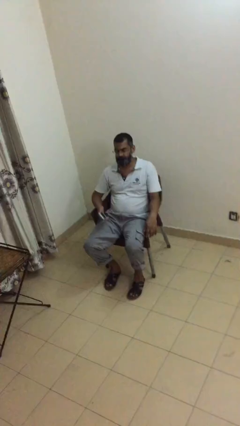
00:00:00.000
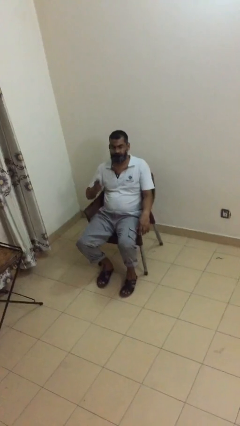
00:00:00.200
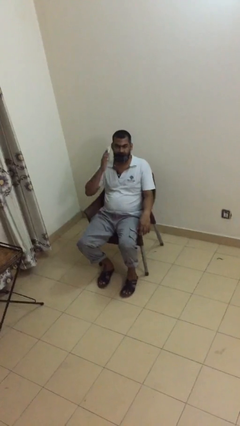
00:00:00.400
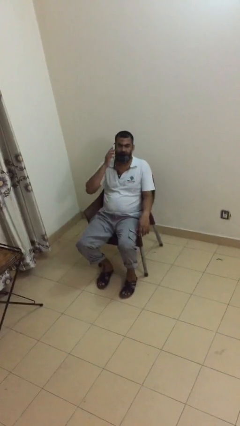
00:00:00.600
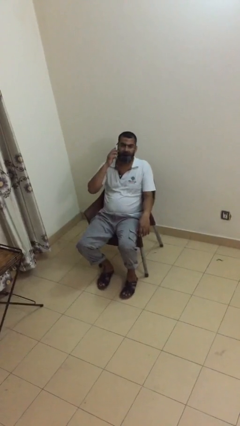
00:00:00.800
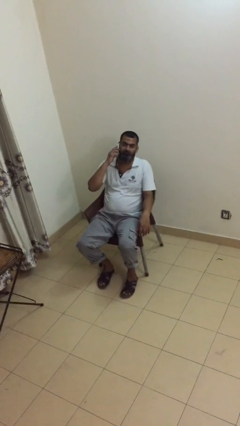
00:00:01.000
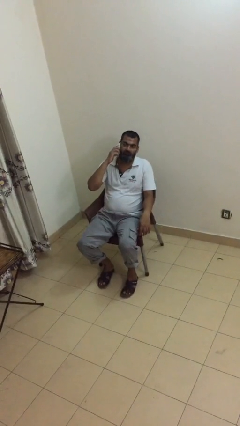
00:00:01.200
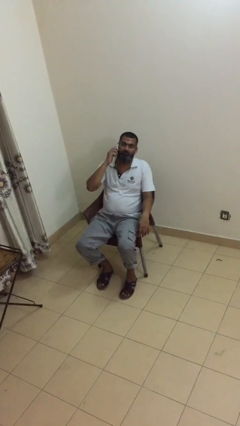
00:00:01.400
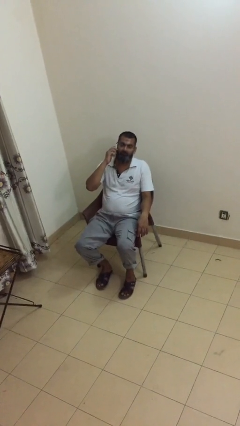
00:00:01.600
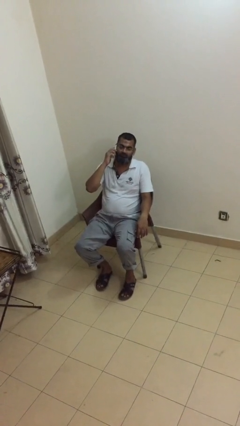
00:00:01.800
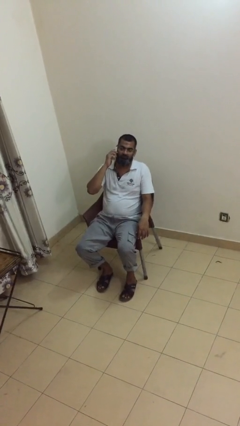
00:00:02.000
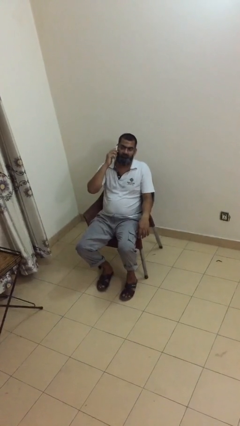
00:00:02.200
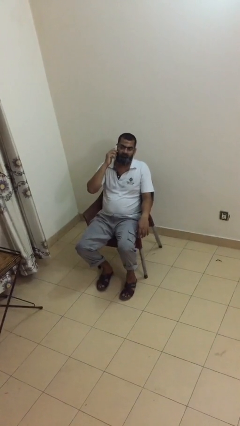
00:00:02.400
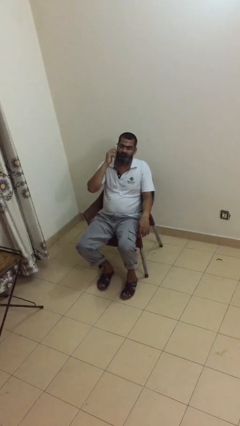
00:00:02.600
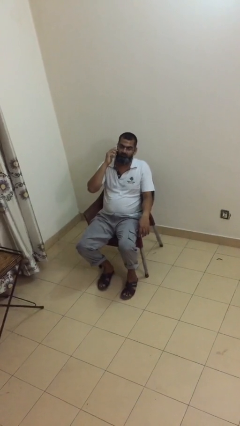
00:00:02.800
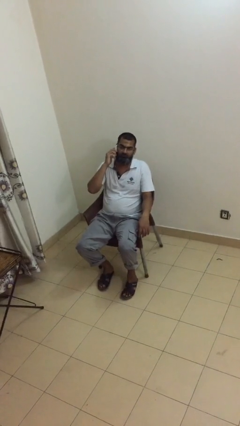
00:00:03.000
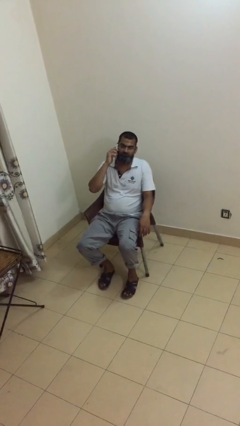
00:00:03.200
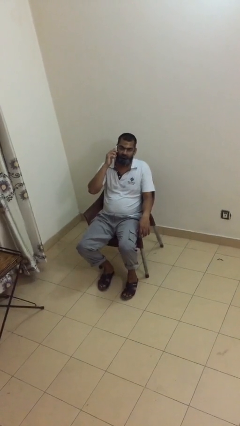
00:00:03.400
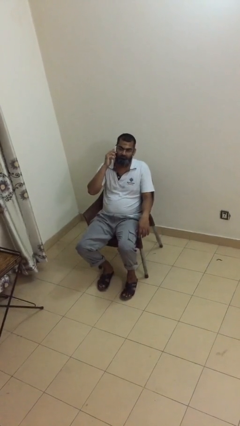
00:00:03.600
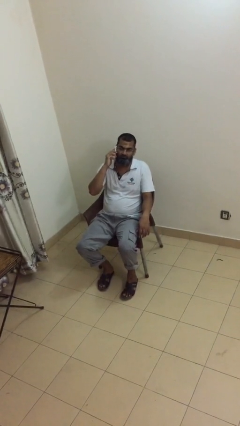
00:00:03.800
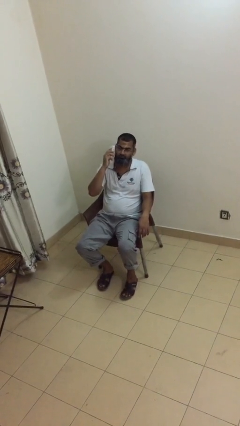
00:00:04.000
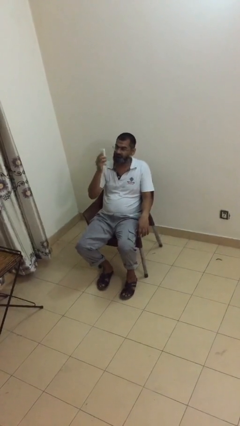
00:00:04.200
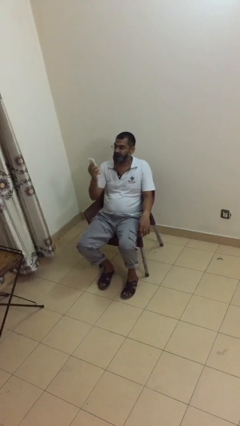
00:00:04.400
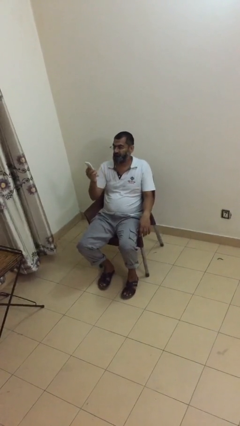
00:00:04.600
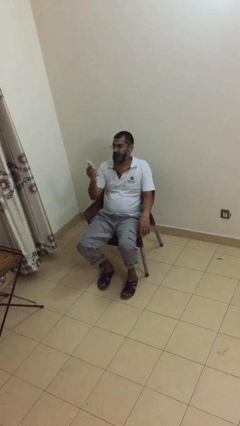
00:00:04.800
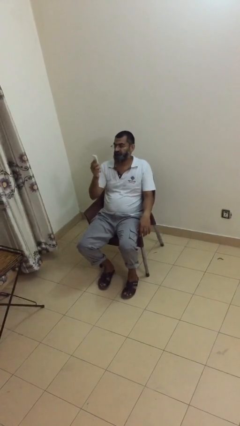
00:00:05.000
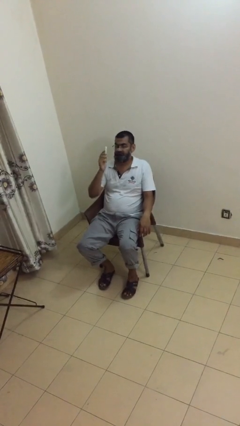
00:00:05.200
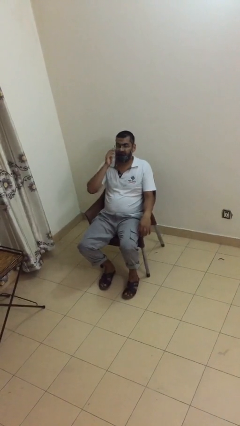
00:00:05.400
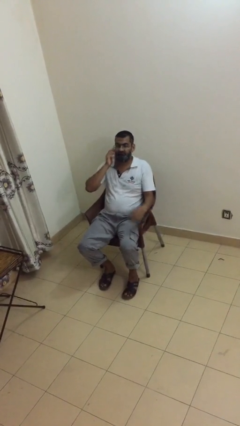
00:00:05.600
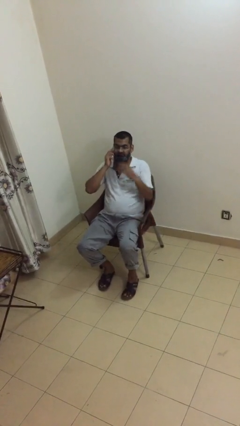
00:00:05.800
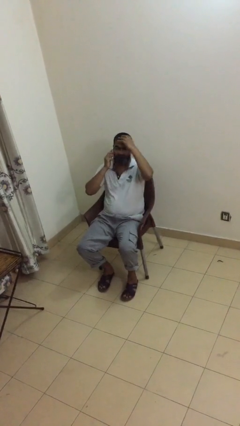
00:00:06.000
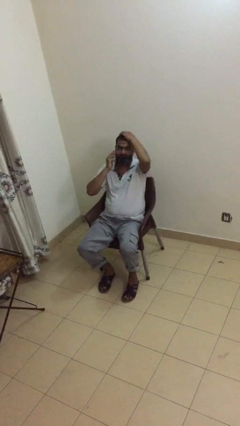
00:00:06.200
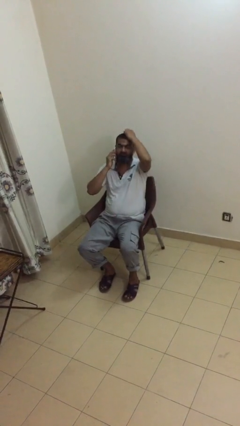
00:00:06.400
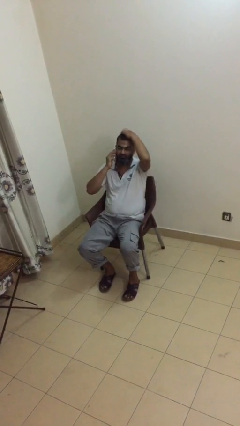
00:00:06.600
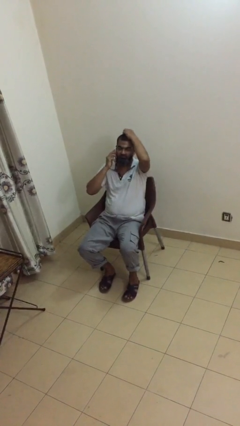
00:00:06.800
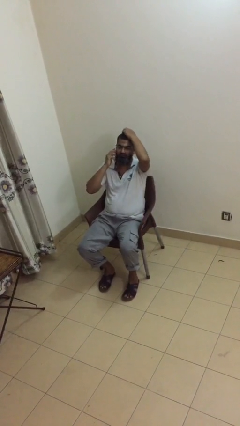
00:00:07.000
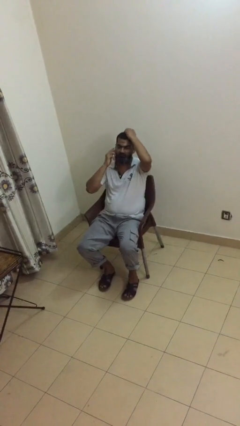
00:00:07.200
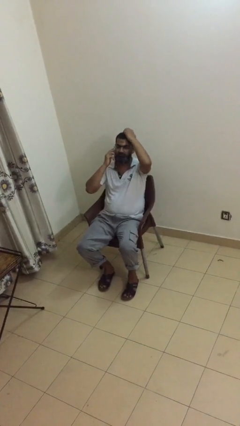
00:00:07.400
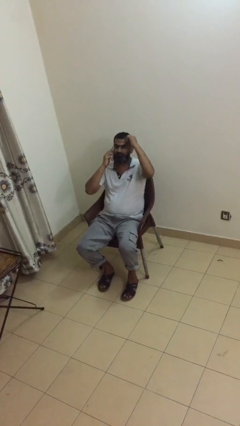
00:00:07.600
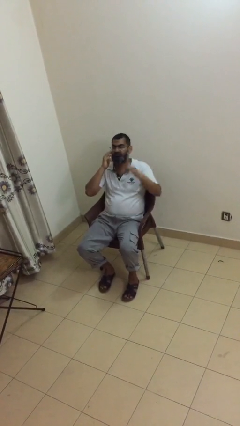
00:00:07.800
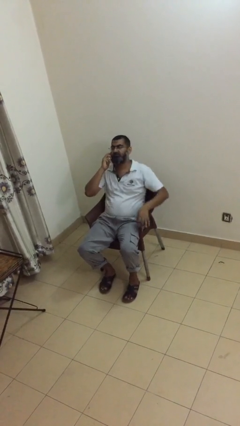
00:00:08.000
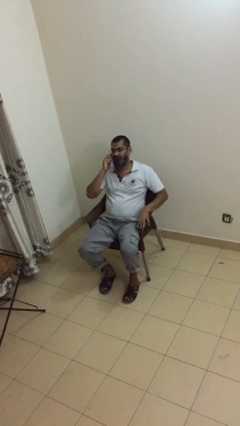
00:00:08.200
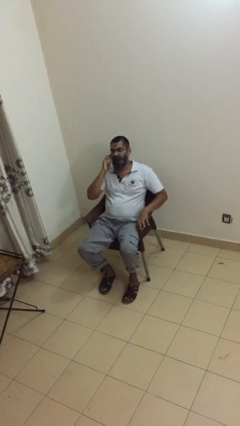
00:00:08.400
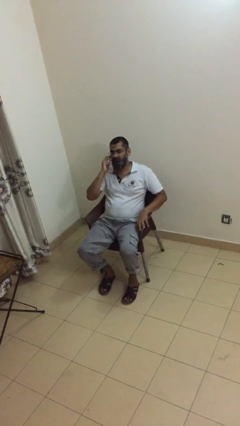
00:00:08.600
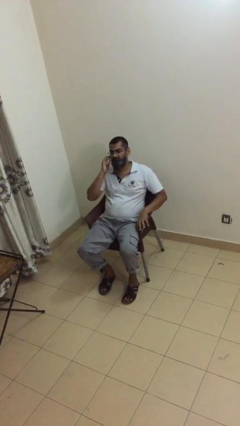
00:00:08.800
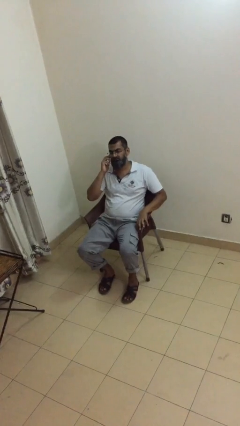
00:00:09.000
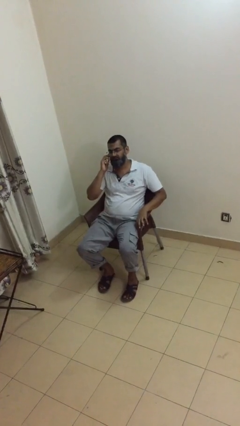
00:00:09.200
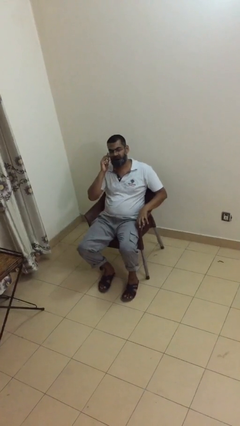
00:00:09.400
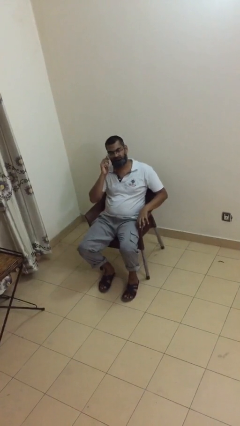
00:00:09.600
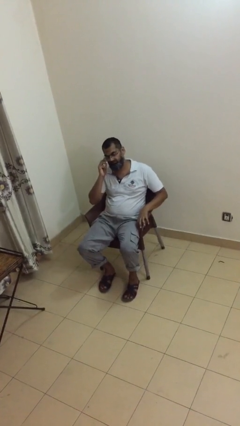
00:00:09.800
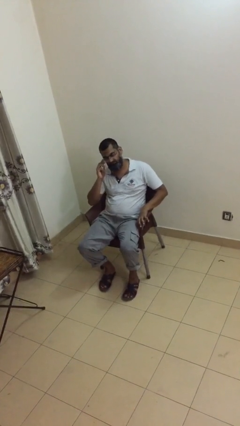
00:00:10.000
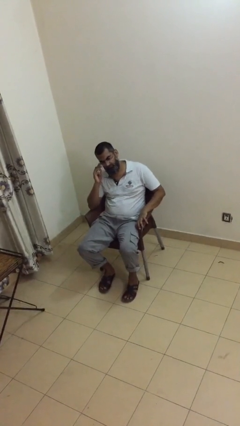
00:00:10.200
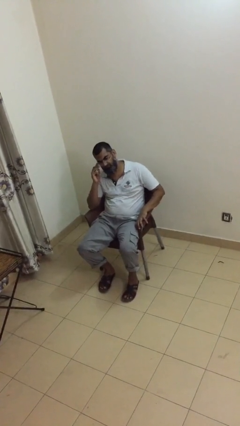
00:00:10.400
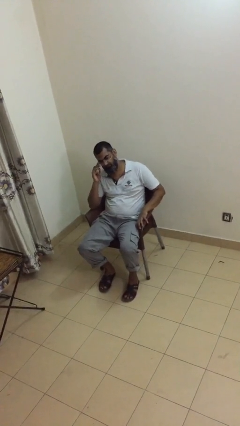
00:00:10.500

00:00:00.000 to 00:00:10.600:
person talks on phone

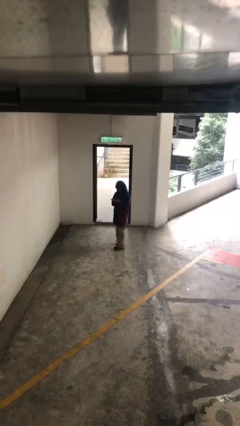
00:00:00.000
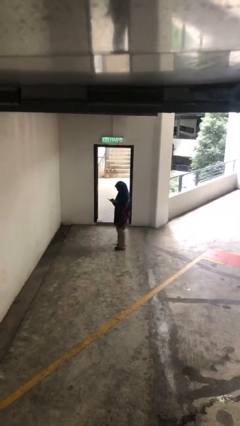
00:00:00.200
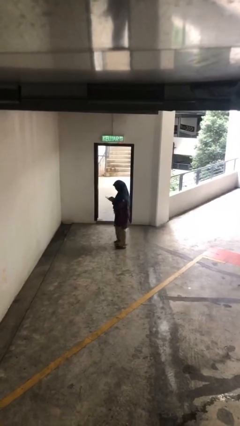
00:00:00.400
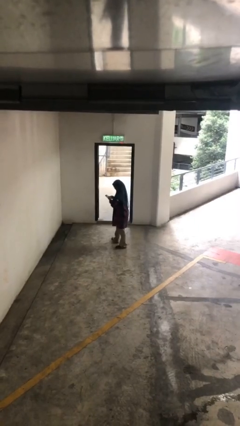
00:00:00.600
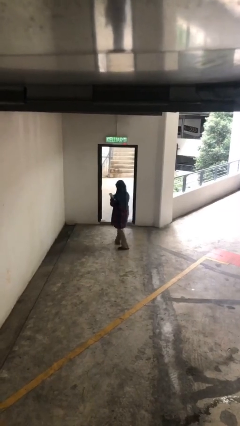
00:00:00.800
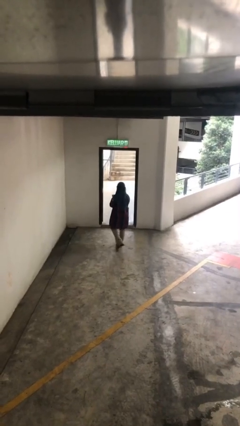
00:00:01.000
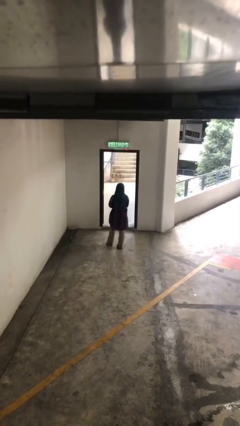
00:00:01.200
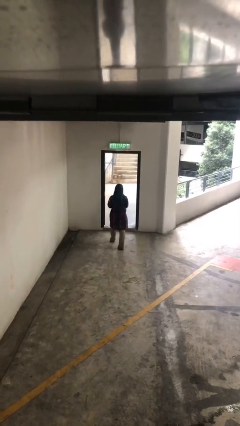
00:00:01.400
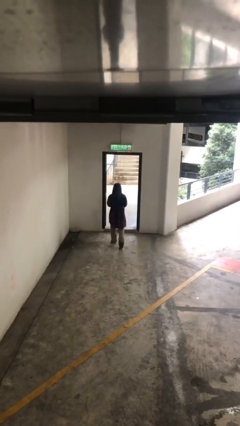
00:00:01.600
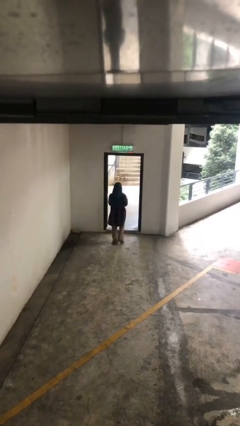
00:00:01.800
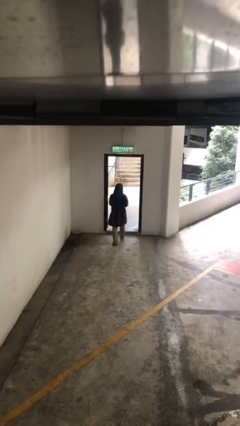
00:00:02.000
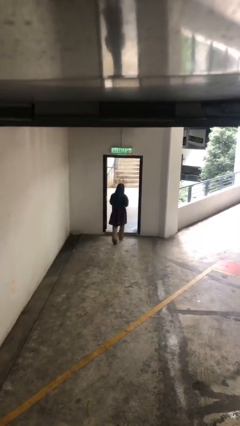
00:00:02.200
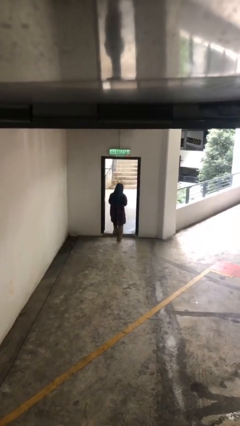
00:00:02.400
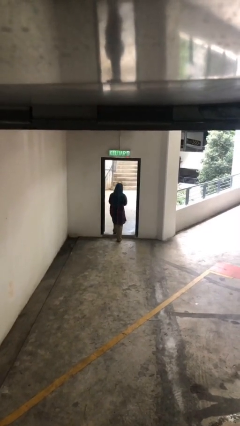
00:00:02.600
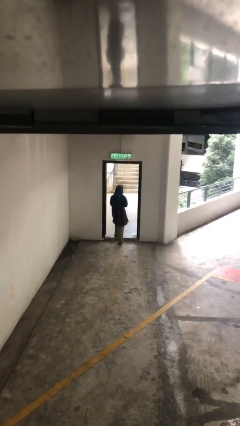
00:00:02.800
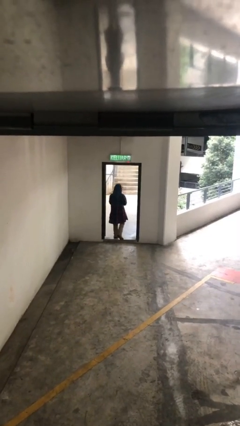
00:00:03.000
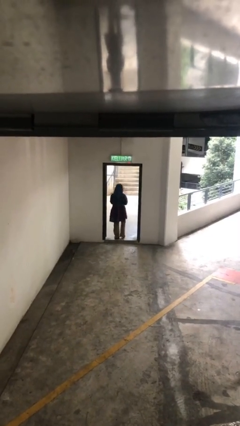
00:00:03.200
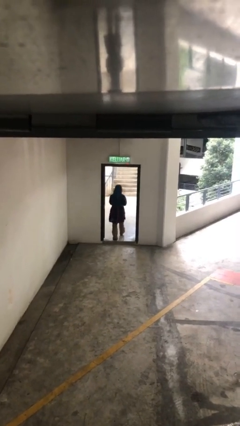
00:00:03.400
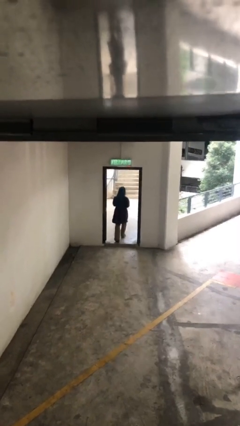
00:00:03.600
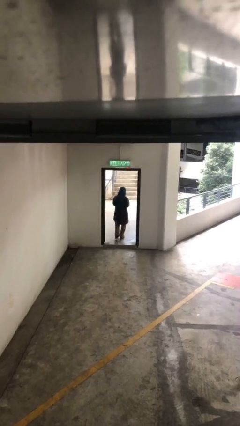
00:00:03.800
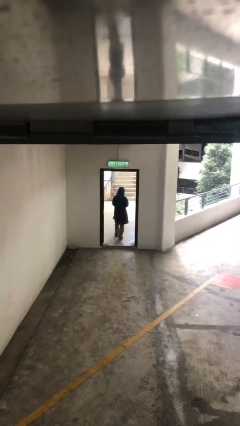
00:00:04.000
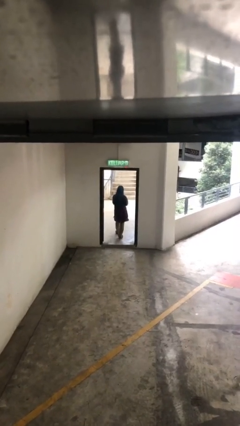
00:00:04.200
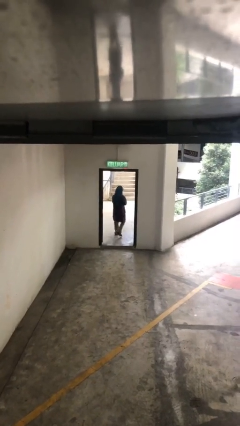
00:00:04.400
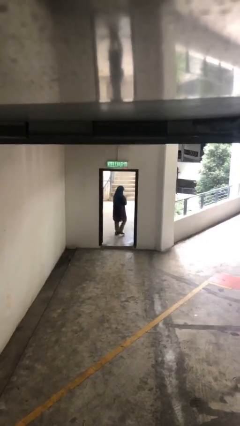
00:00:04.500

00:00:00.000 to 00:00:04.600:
person exits scene through structure

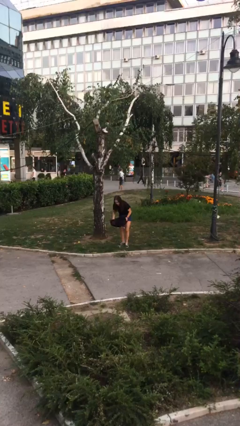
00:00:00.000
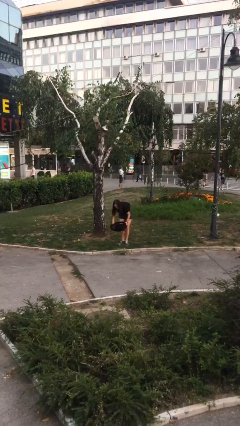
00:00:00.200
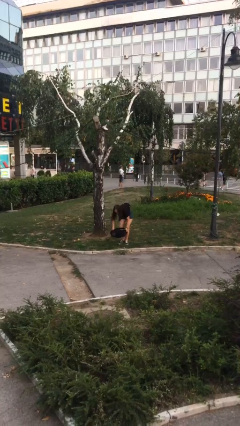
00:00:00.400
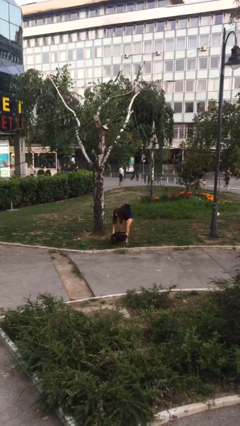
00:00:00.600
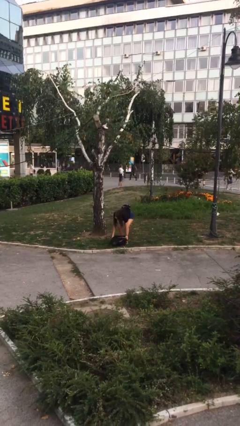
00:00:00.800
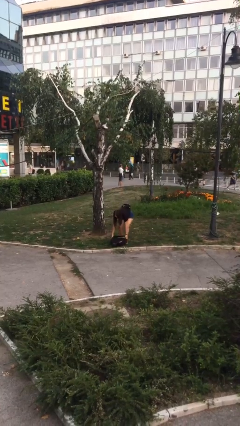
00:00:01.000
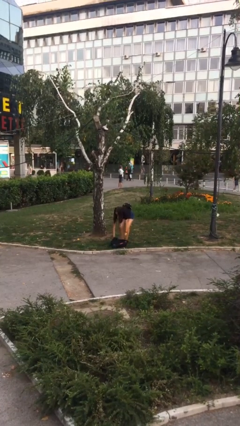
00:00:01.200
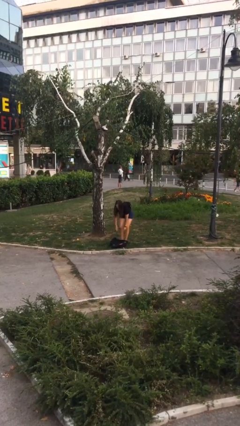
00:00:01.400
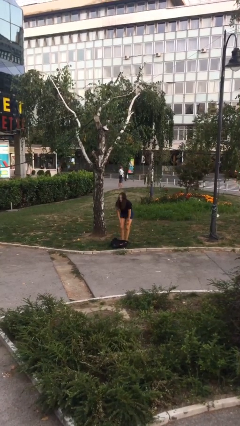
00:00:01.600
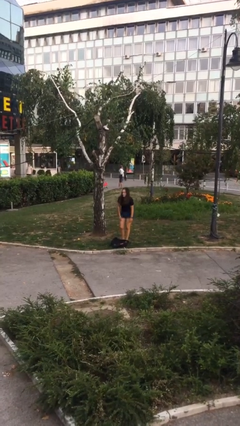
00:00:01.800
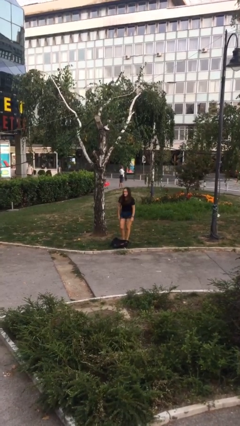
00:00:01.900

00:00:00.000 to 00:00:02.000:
person puts down object on floor

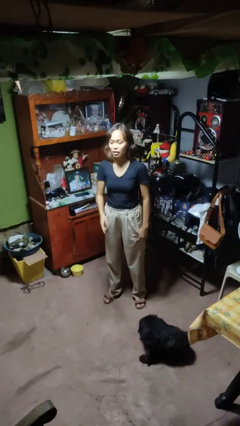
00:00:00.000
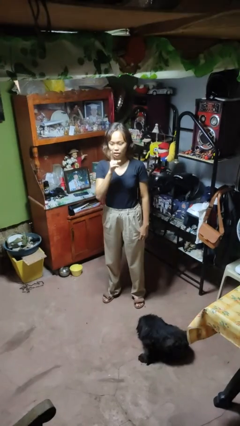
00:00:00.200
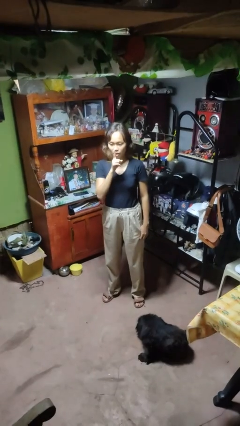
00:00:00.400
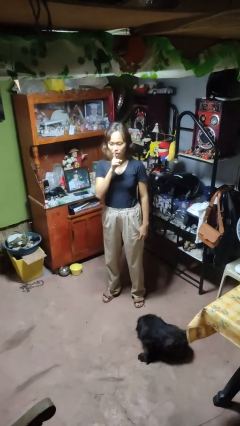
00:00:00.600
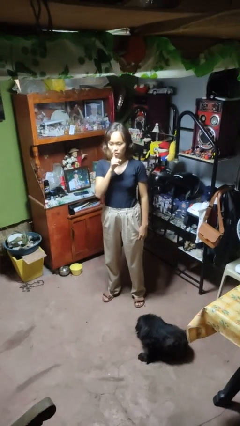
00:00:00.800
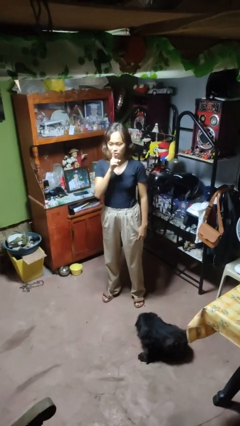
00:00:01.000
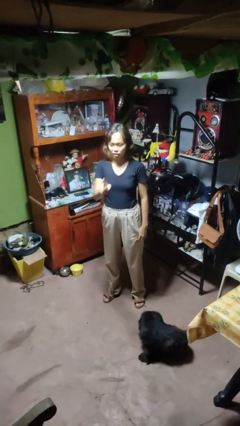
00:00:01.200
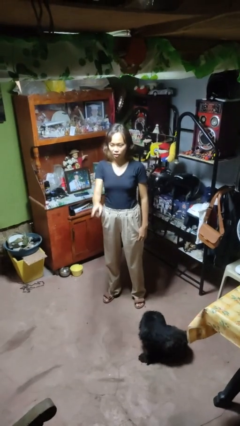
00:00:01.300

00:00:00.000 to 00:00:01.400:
person gestures be quiet
